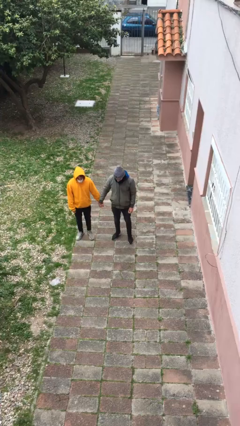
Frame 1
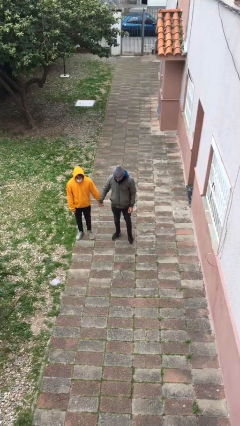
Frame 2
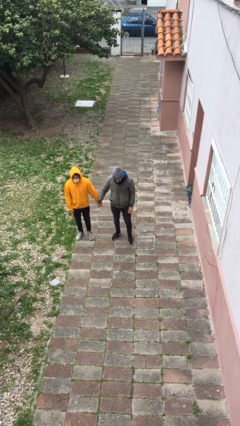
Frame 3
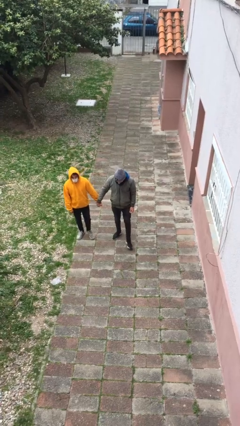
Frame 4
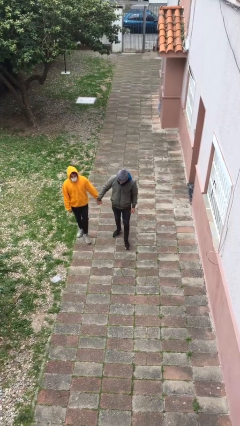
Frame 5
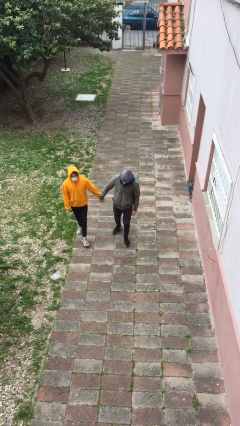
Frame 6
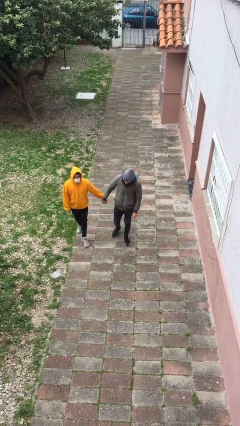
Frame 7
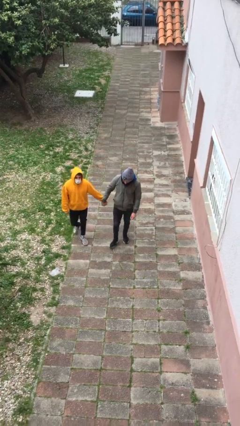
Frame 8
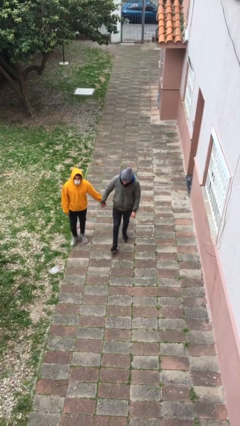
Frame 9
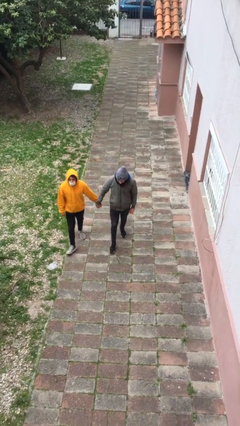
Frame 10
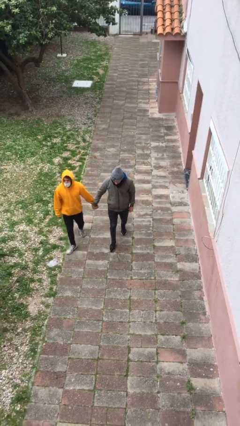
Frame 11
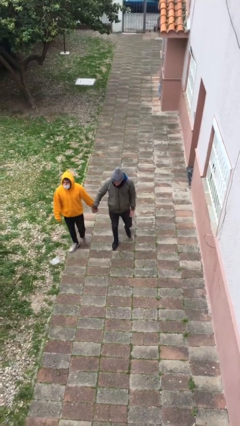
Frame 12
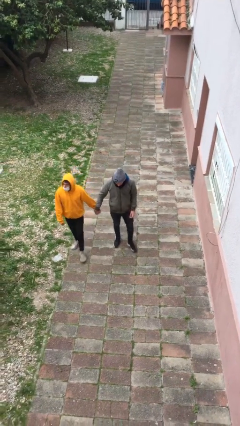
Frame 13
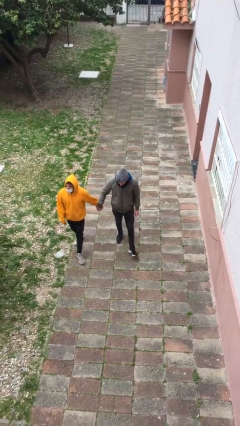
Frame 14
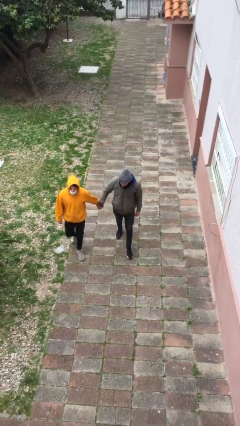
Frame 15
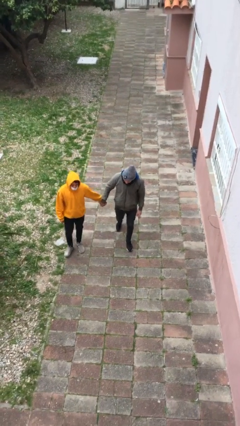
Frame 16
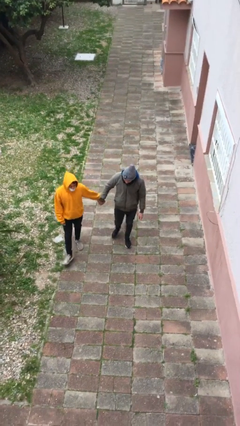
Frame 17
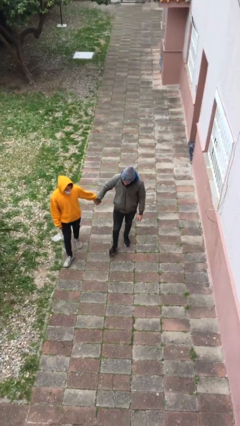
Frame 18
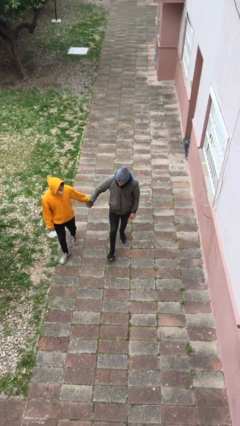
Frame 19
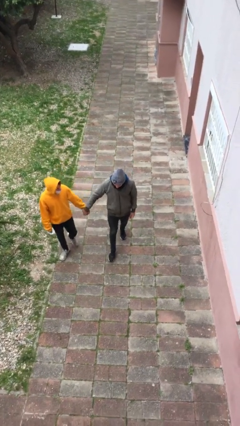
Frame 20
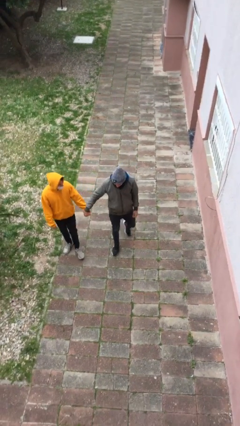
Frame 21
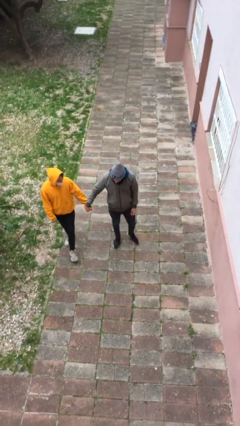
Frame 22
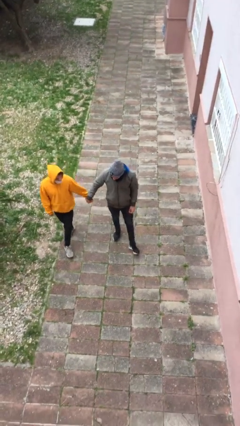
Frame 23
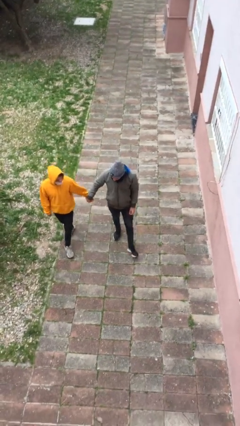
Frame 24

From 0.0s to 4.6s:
person holds hand

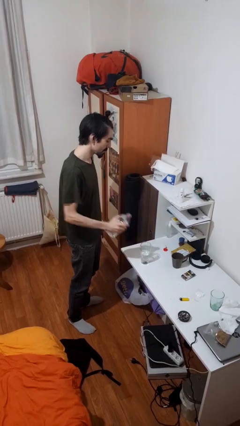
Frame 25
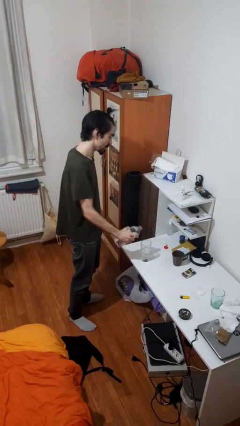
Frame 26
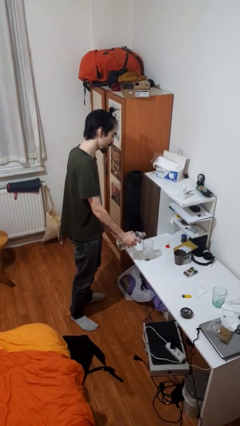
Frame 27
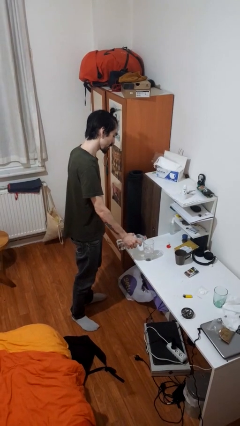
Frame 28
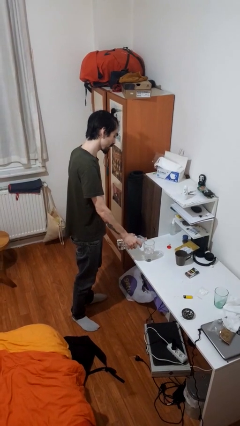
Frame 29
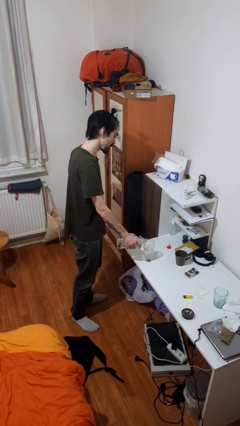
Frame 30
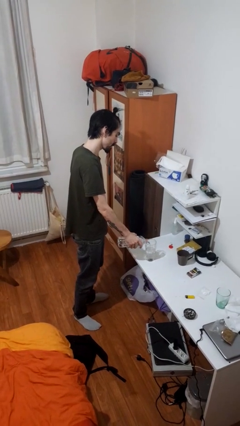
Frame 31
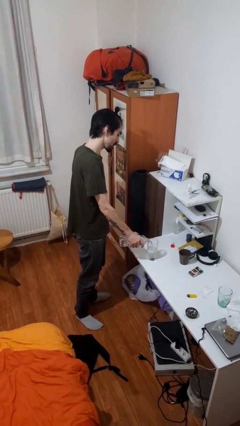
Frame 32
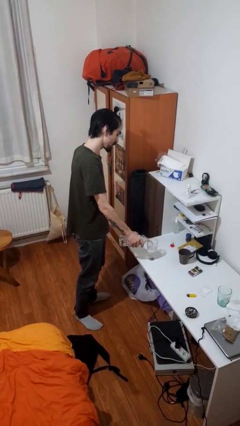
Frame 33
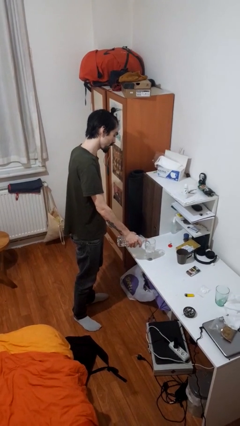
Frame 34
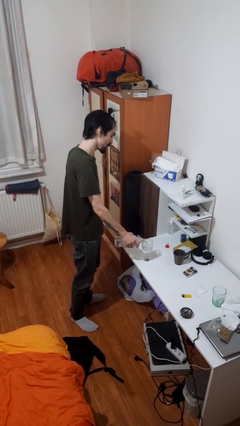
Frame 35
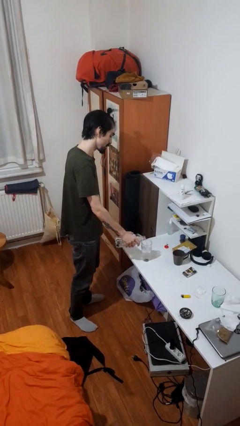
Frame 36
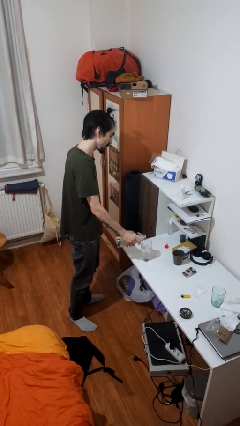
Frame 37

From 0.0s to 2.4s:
person pours liquid into cup

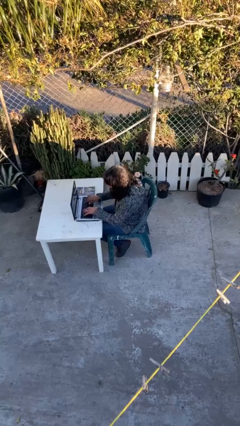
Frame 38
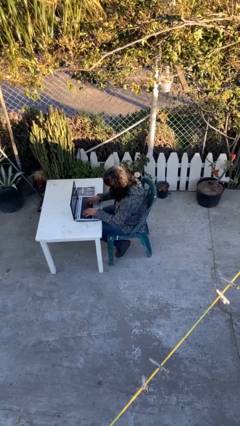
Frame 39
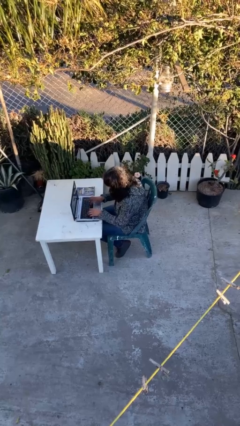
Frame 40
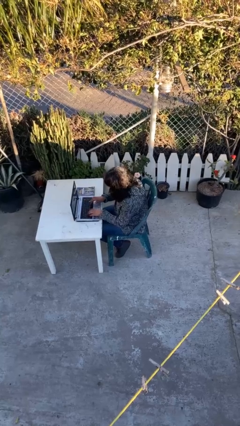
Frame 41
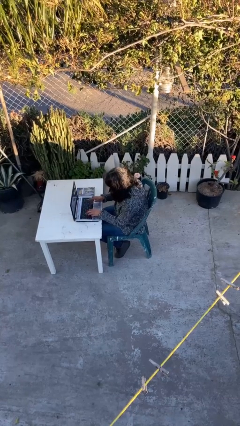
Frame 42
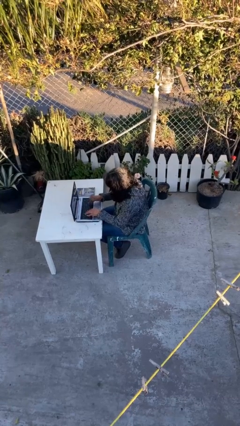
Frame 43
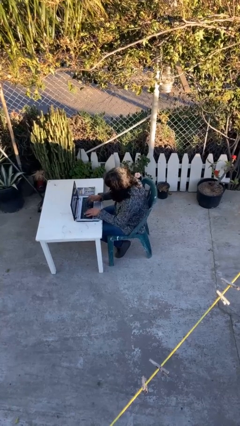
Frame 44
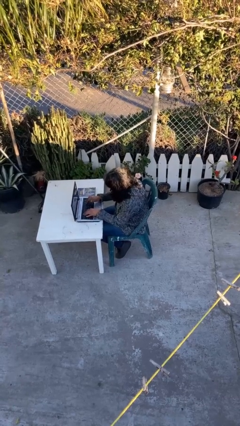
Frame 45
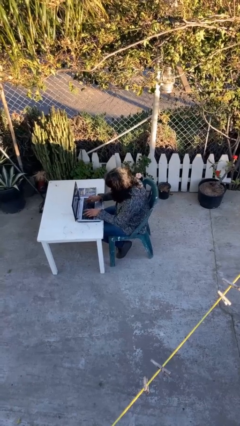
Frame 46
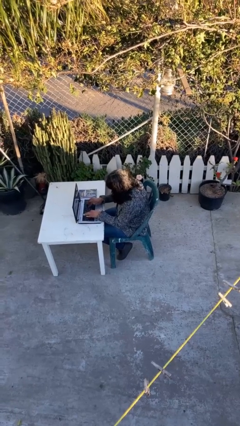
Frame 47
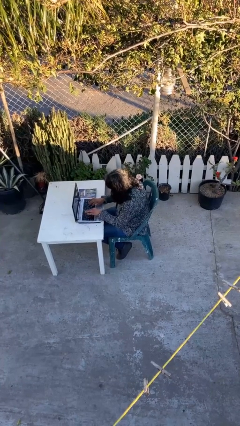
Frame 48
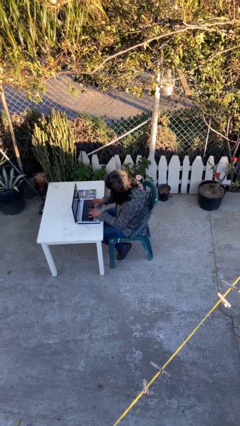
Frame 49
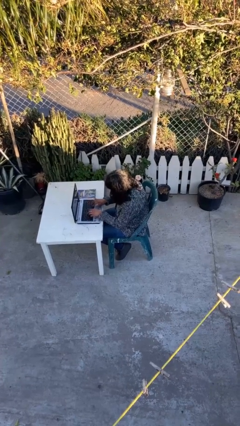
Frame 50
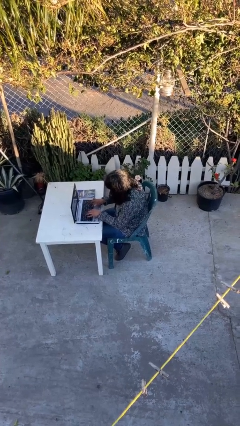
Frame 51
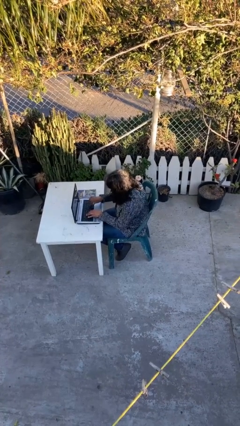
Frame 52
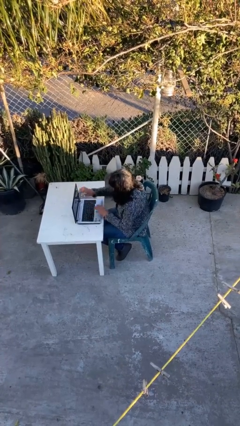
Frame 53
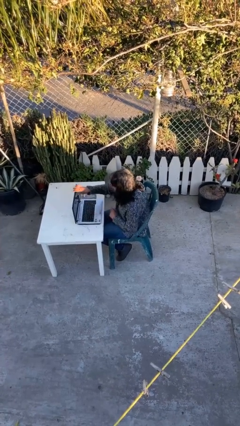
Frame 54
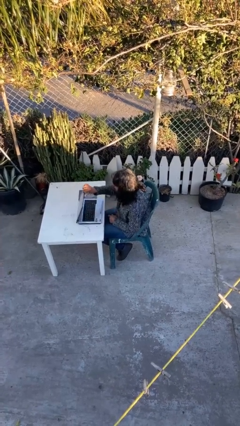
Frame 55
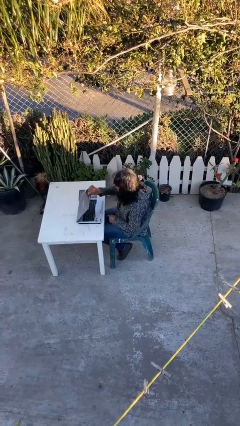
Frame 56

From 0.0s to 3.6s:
person interacts with laptop

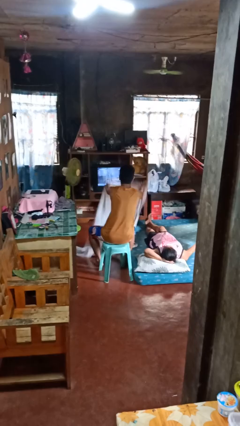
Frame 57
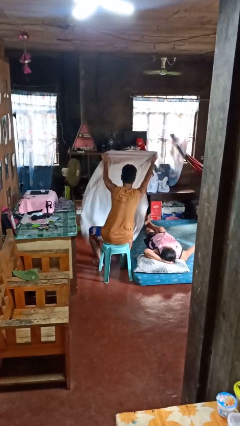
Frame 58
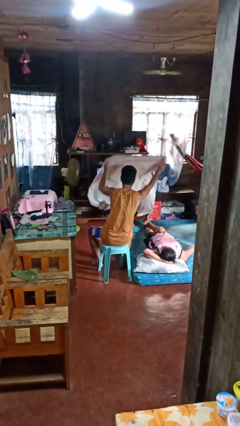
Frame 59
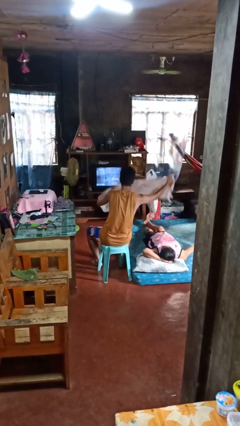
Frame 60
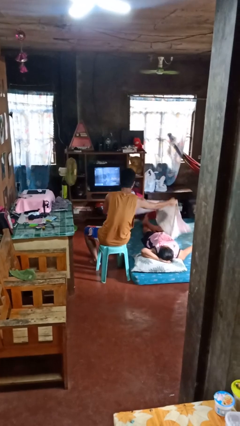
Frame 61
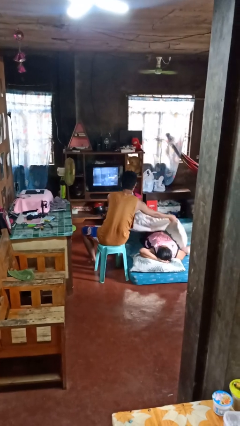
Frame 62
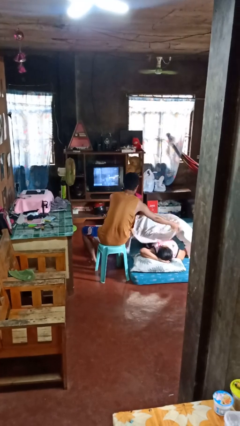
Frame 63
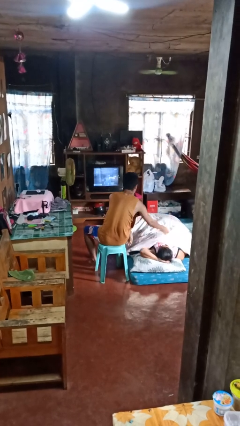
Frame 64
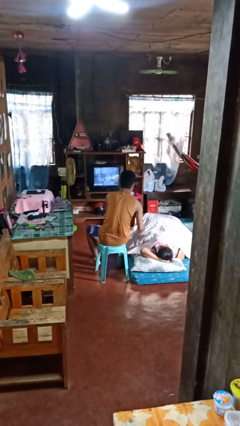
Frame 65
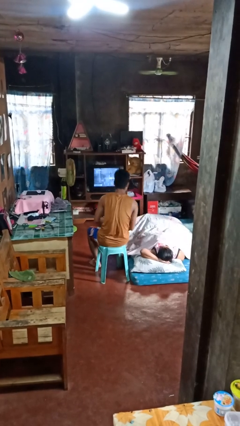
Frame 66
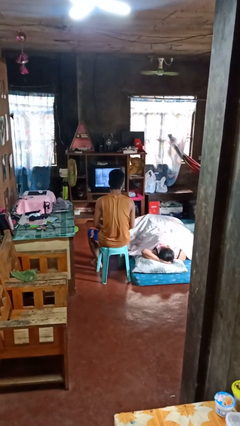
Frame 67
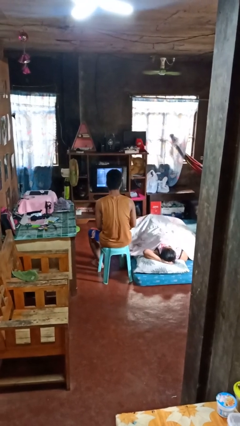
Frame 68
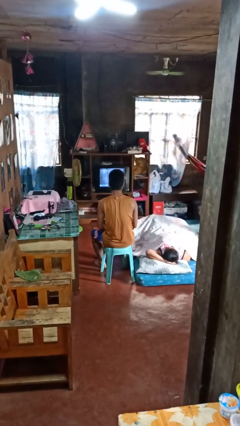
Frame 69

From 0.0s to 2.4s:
person covers friend with blanket

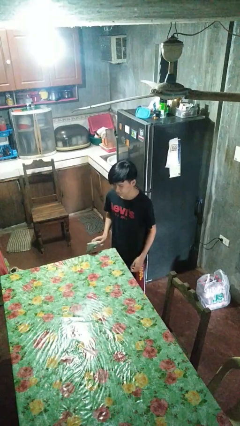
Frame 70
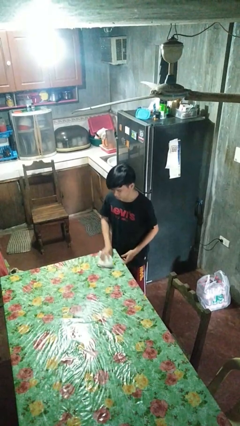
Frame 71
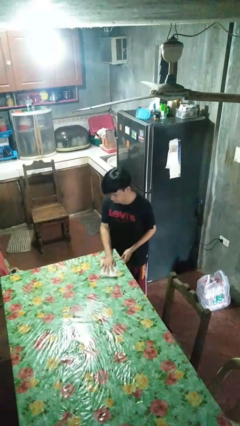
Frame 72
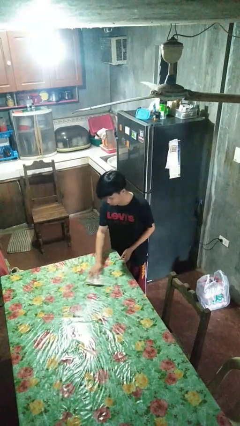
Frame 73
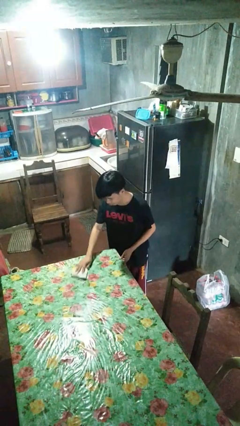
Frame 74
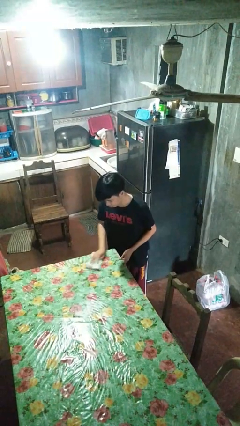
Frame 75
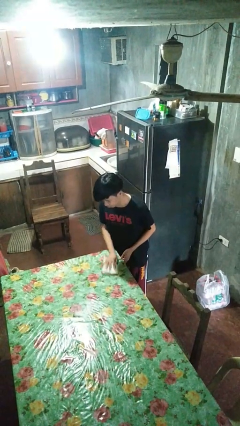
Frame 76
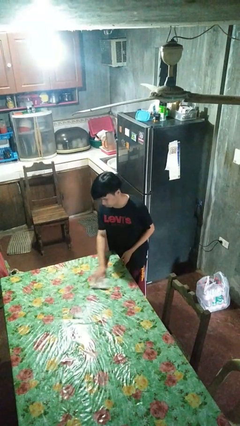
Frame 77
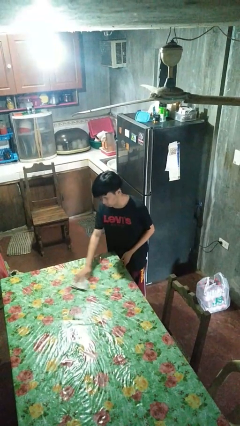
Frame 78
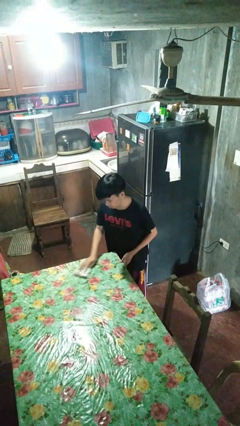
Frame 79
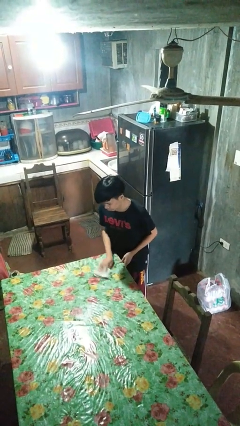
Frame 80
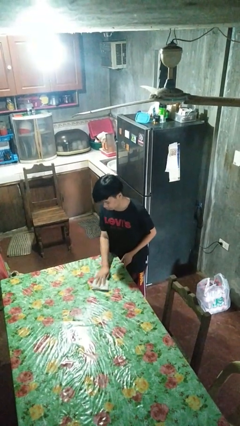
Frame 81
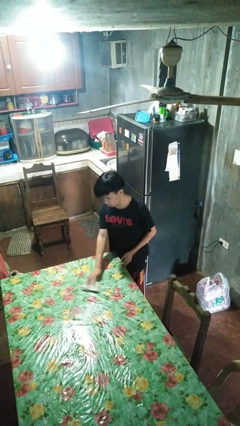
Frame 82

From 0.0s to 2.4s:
person cleans table with rag

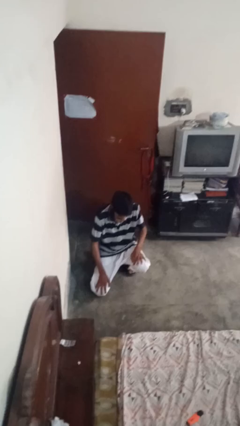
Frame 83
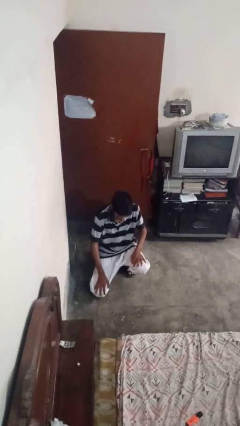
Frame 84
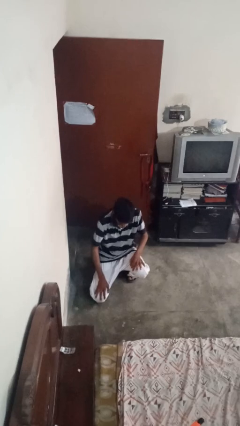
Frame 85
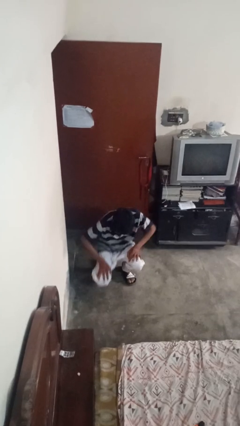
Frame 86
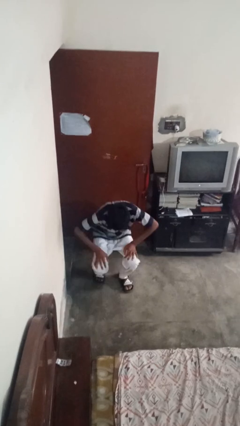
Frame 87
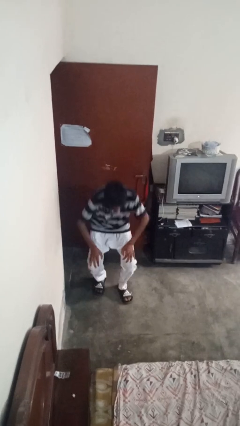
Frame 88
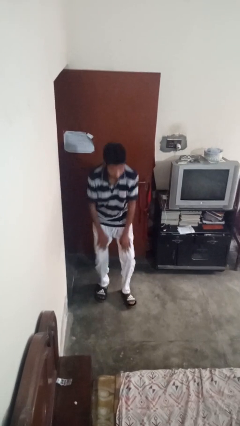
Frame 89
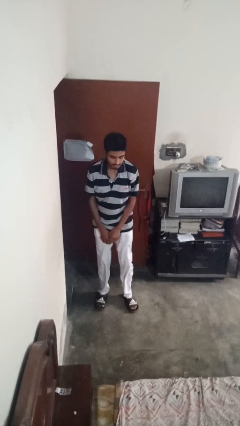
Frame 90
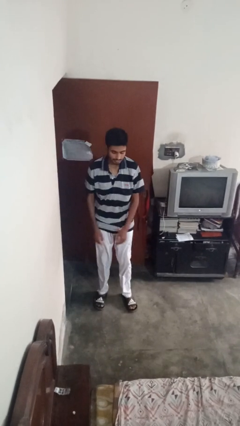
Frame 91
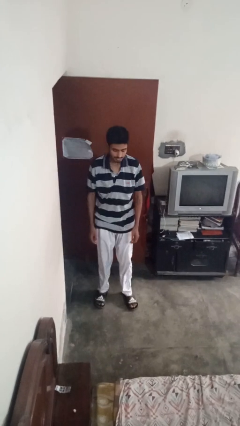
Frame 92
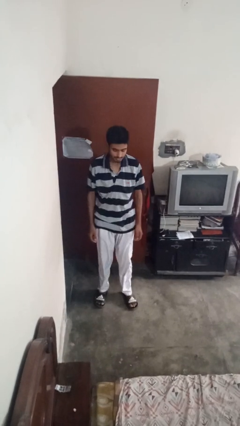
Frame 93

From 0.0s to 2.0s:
person stands up from floor
